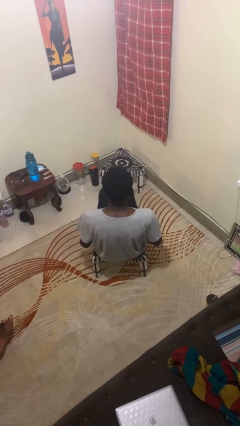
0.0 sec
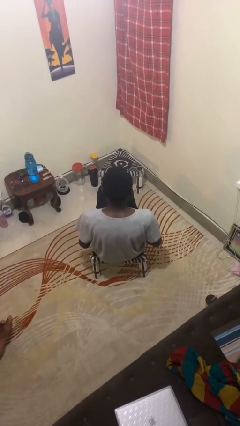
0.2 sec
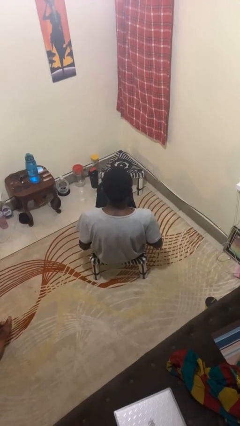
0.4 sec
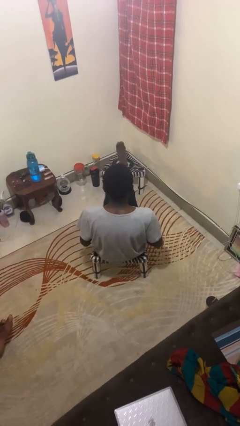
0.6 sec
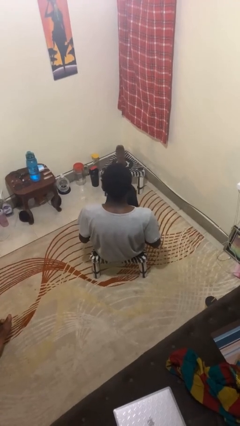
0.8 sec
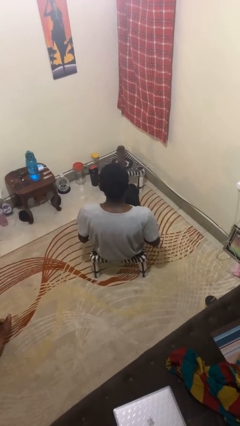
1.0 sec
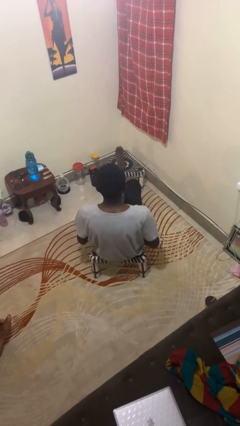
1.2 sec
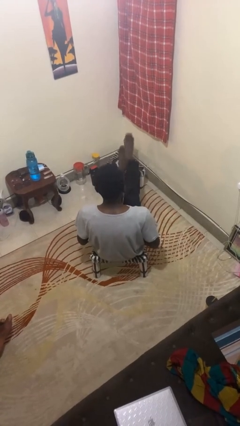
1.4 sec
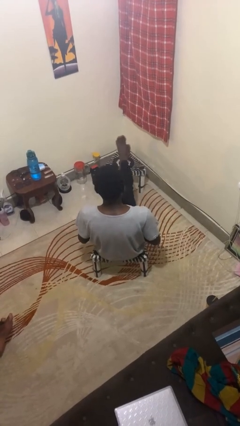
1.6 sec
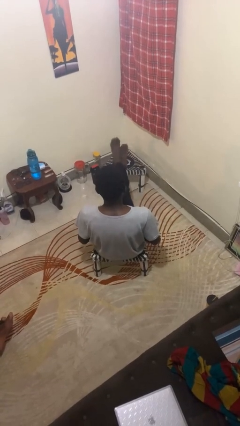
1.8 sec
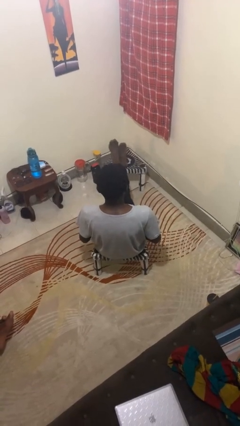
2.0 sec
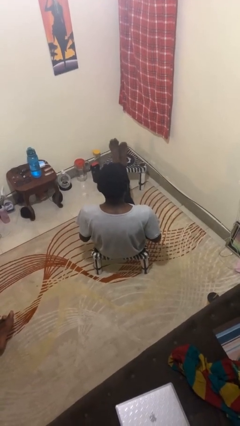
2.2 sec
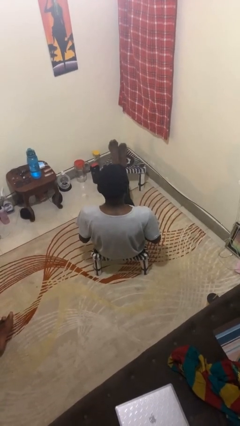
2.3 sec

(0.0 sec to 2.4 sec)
person puts feet up

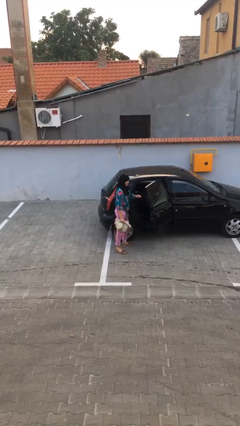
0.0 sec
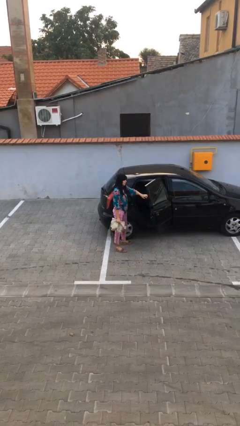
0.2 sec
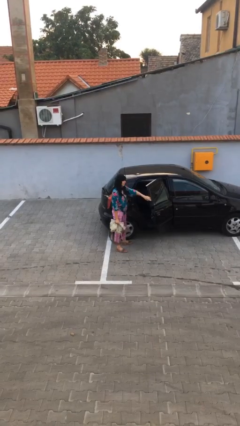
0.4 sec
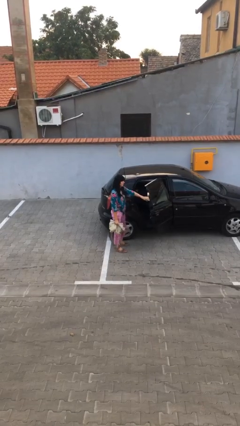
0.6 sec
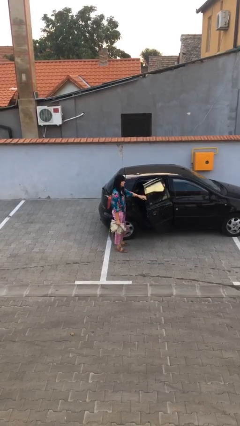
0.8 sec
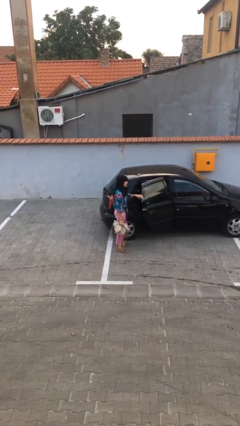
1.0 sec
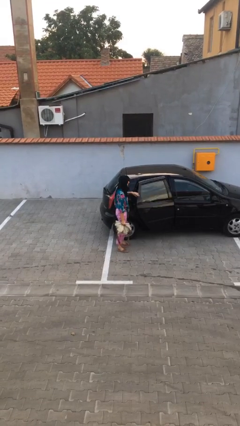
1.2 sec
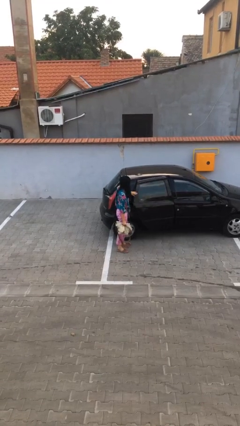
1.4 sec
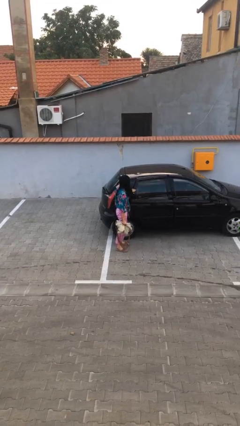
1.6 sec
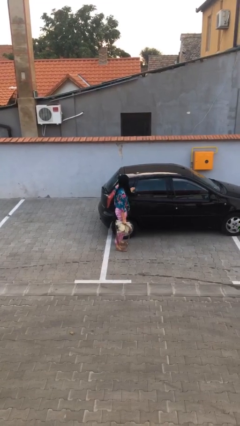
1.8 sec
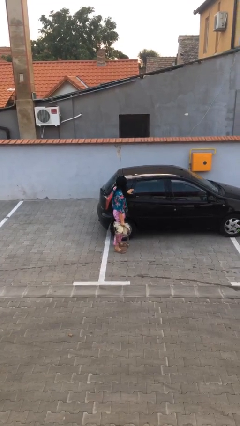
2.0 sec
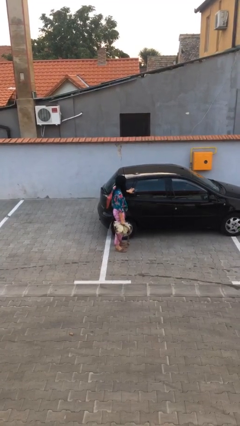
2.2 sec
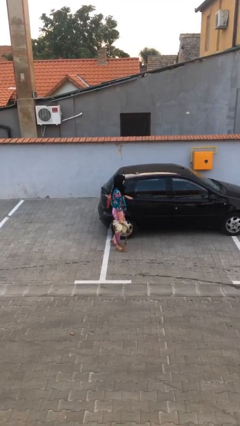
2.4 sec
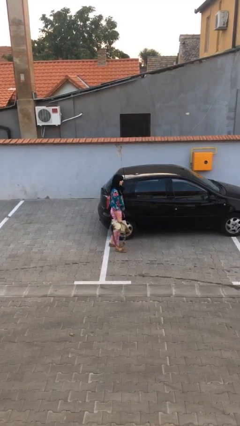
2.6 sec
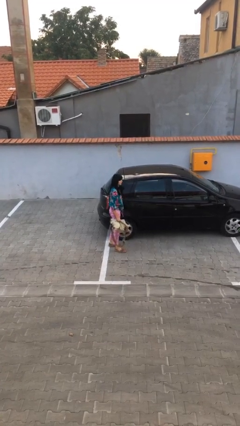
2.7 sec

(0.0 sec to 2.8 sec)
person closes car door

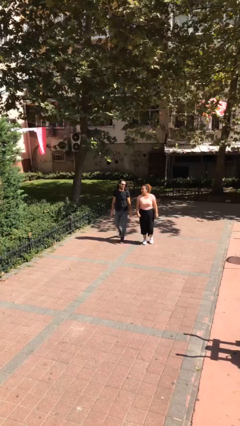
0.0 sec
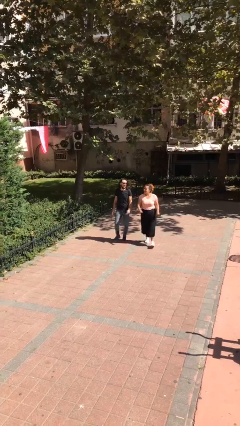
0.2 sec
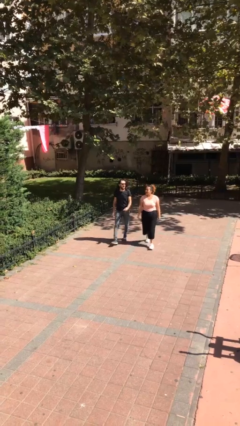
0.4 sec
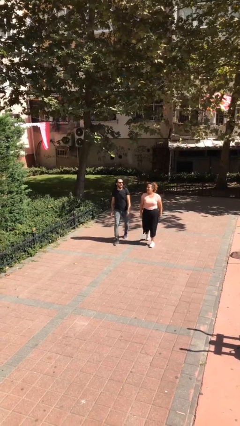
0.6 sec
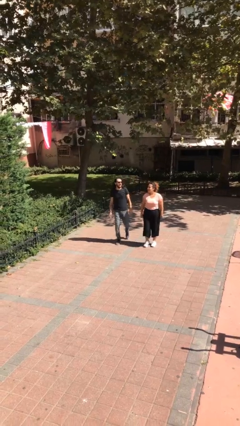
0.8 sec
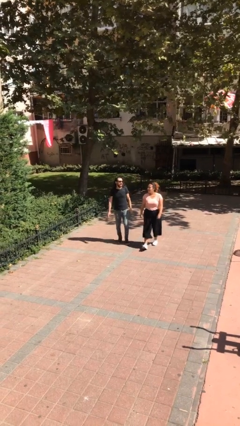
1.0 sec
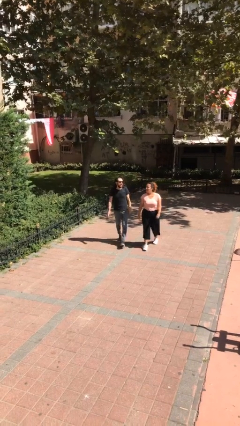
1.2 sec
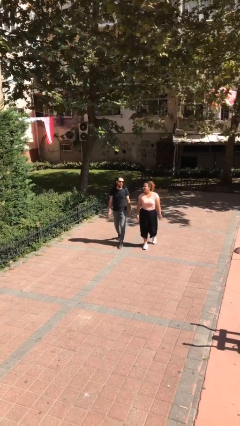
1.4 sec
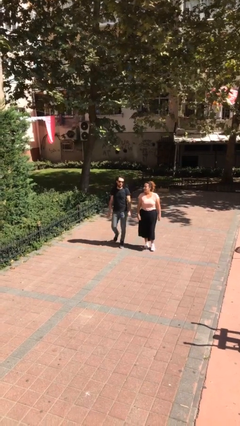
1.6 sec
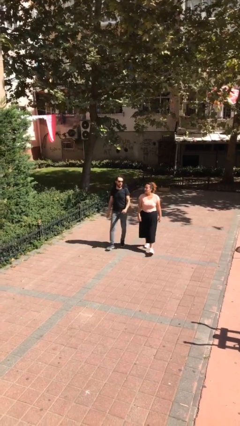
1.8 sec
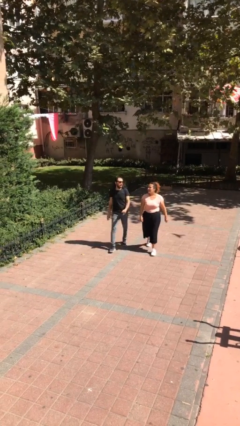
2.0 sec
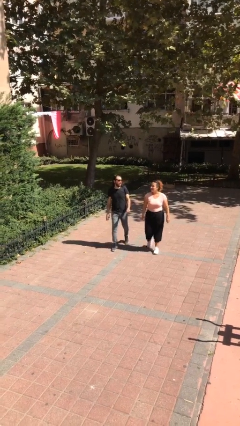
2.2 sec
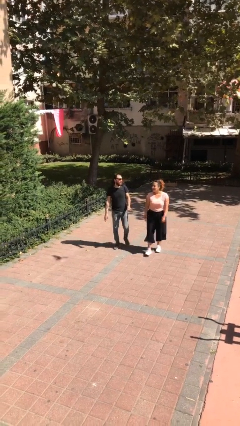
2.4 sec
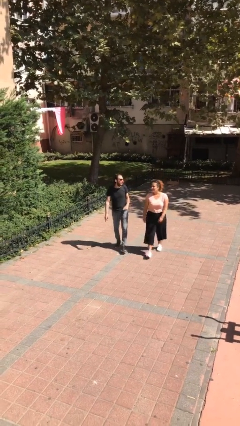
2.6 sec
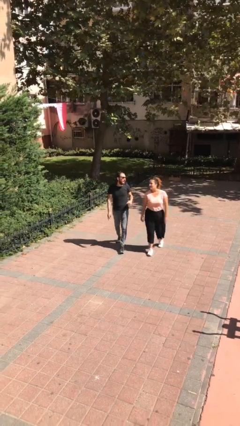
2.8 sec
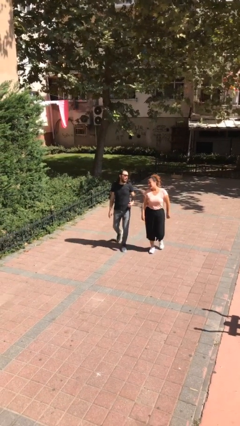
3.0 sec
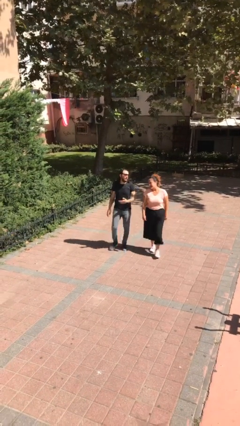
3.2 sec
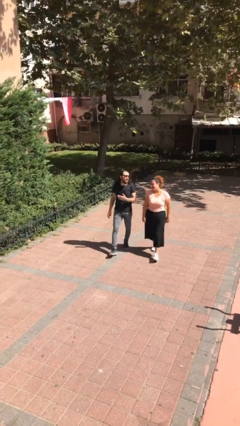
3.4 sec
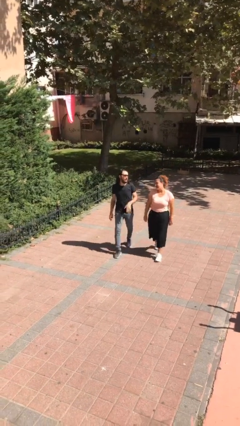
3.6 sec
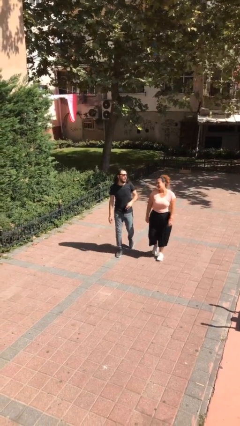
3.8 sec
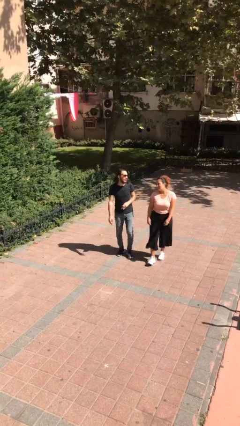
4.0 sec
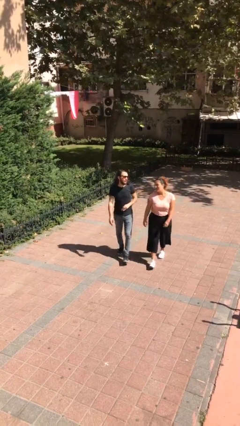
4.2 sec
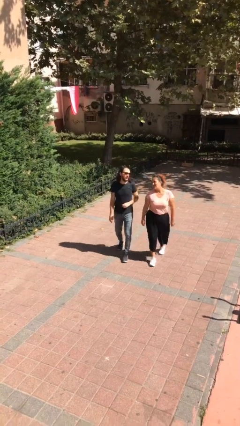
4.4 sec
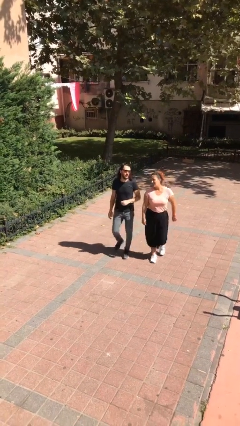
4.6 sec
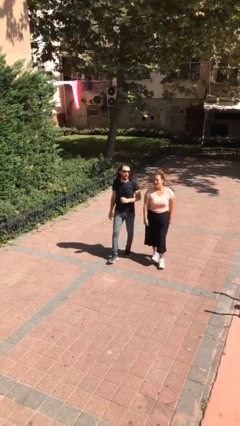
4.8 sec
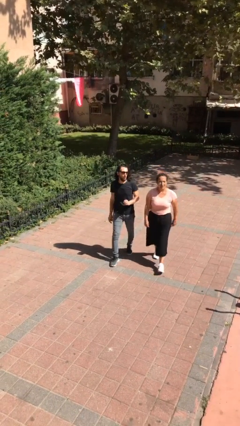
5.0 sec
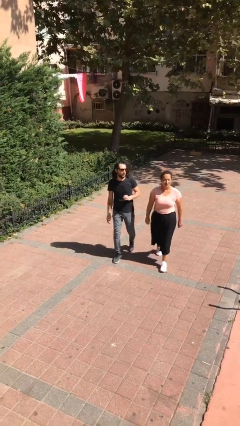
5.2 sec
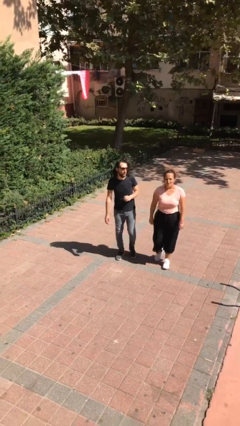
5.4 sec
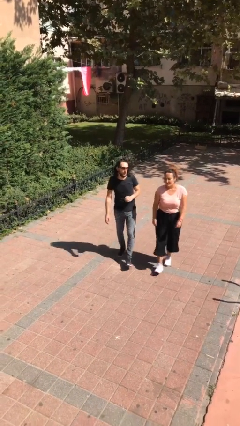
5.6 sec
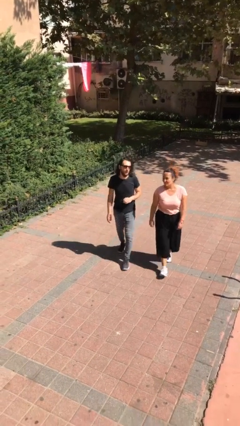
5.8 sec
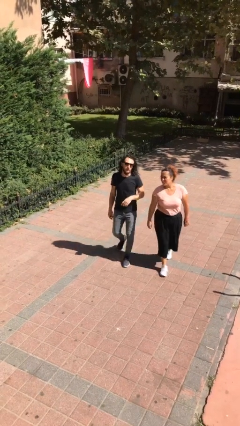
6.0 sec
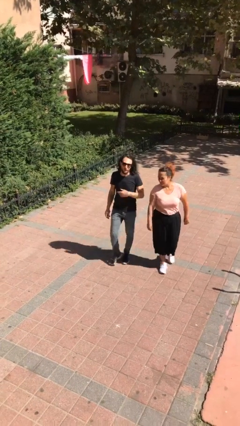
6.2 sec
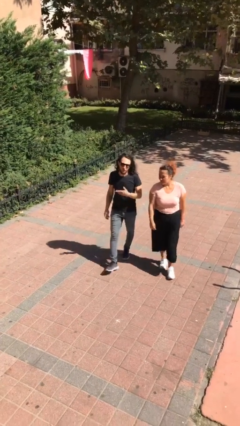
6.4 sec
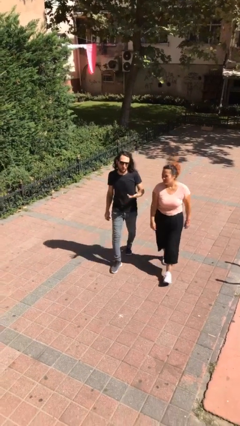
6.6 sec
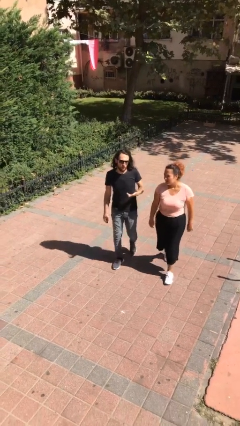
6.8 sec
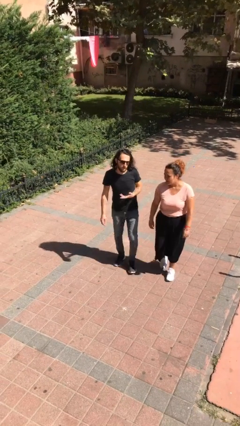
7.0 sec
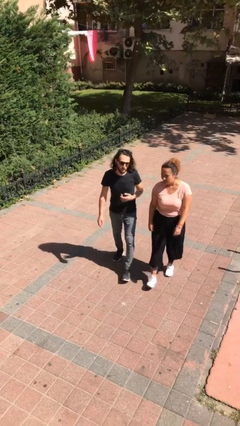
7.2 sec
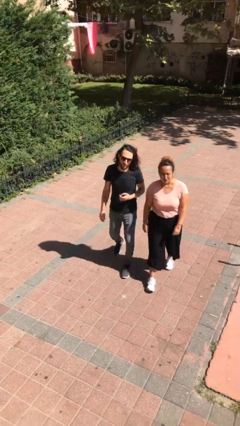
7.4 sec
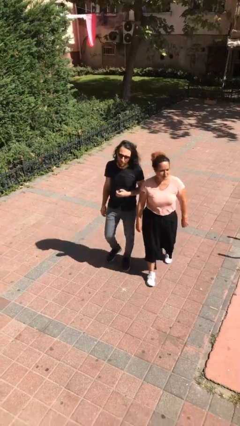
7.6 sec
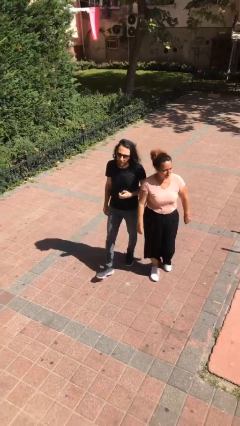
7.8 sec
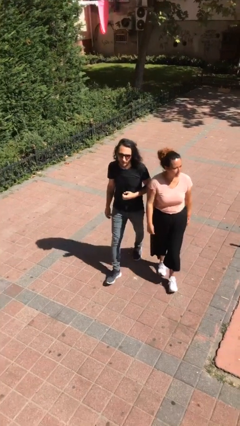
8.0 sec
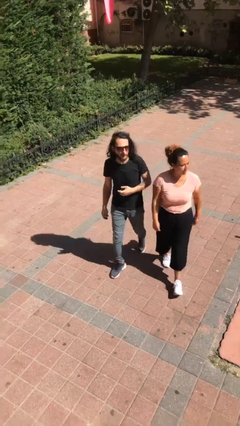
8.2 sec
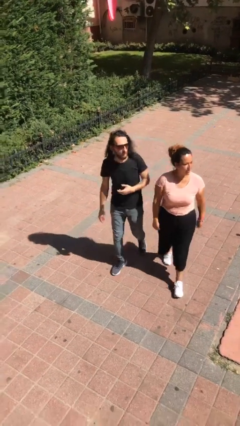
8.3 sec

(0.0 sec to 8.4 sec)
person talks to person

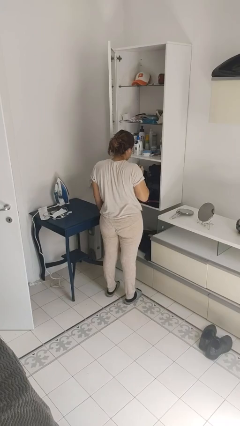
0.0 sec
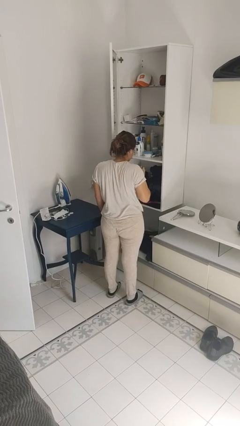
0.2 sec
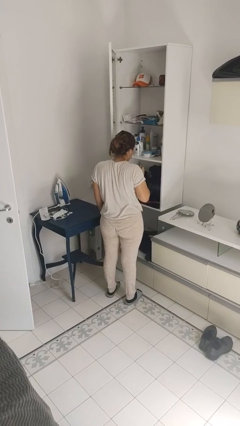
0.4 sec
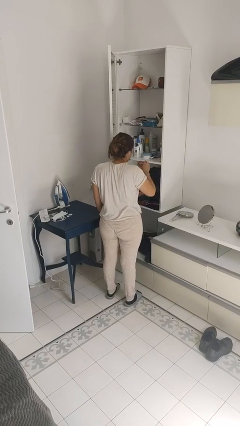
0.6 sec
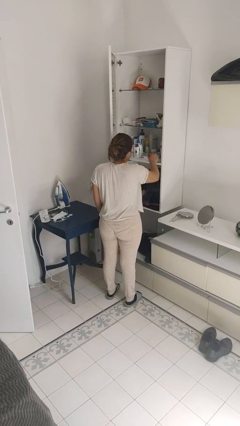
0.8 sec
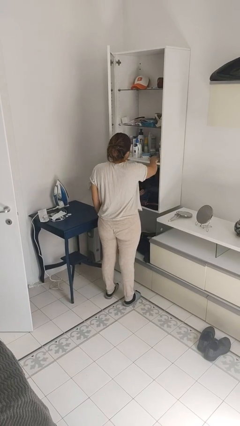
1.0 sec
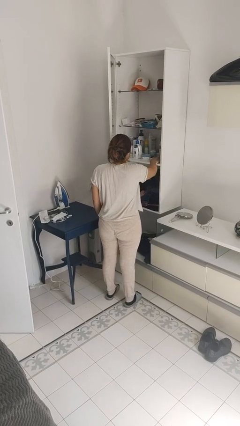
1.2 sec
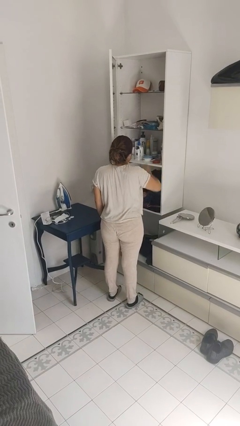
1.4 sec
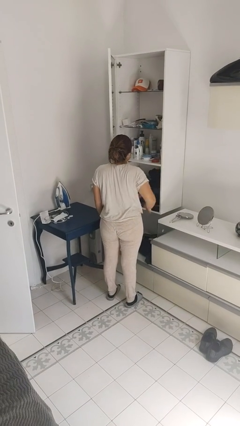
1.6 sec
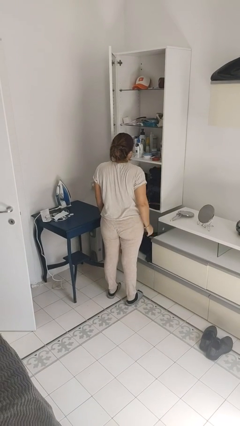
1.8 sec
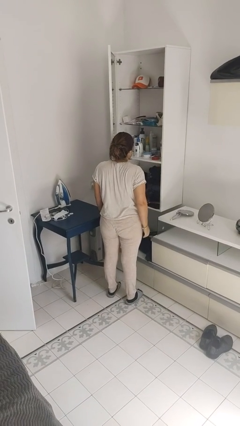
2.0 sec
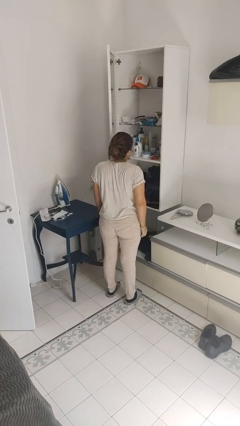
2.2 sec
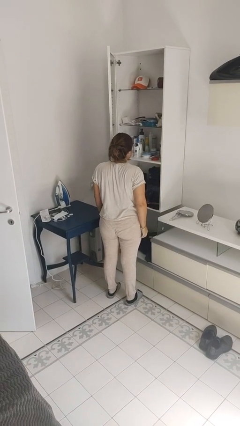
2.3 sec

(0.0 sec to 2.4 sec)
person puts down object on shelf

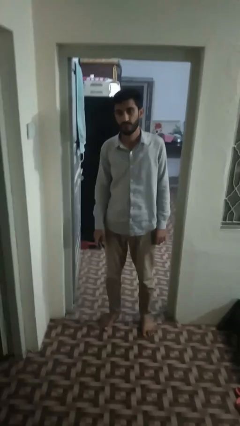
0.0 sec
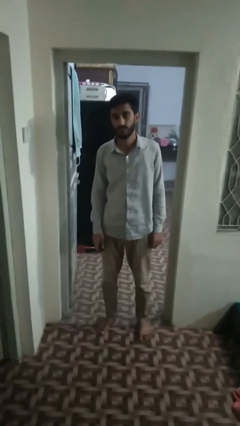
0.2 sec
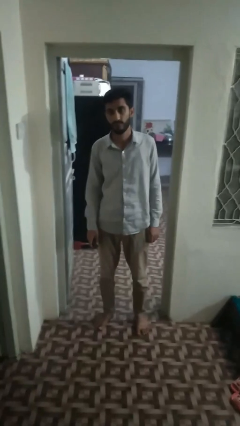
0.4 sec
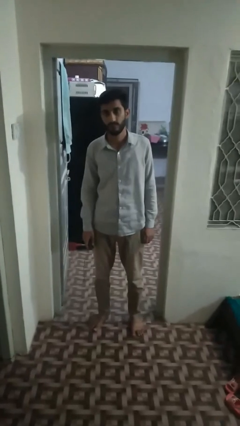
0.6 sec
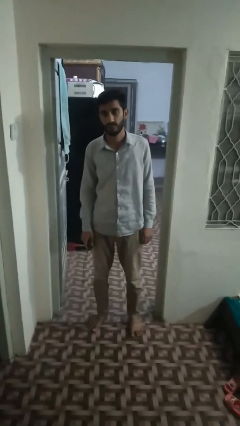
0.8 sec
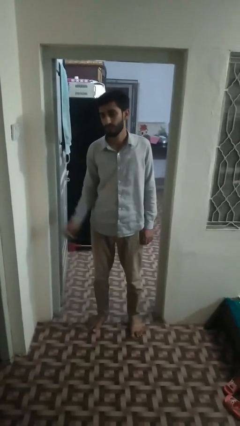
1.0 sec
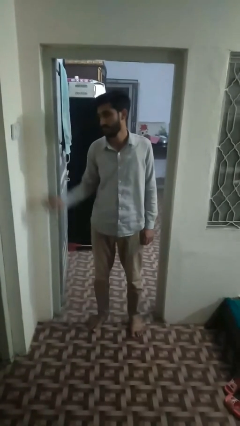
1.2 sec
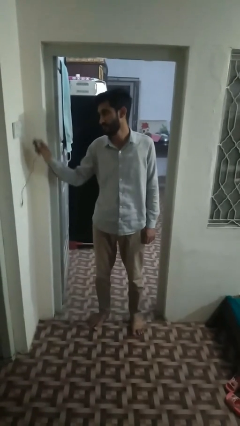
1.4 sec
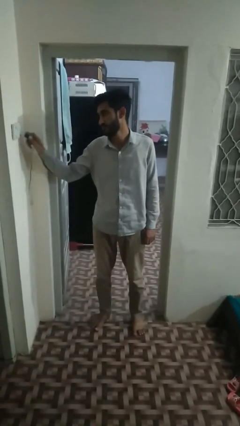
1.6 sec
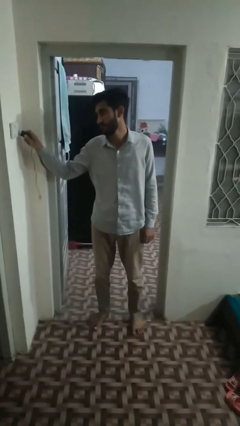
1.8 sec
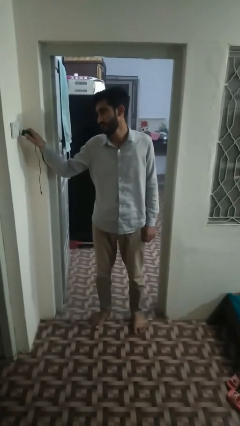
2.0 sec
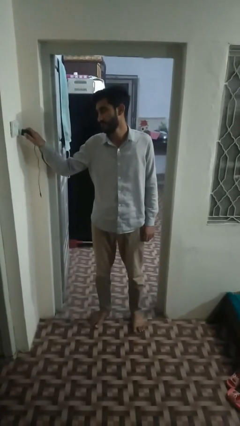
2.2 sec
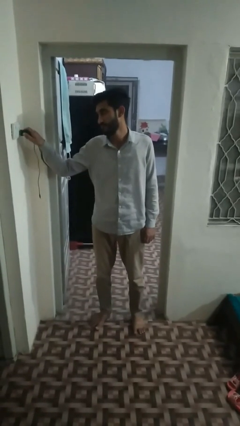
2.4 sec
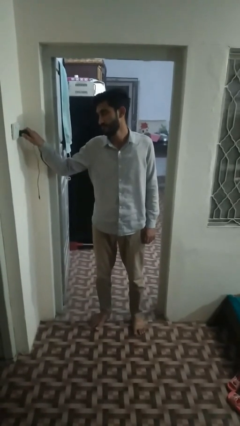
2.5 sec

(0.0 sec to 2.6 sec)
person plugs into electrical socket
